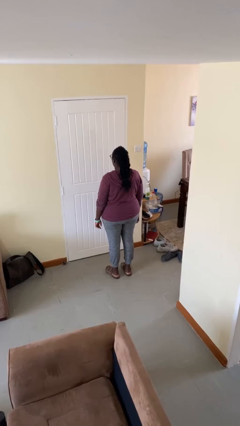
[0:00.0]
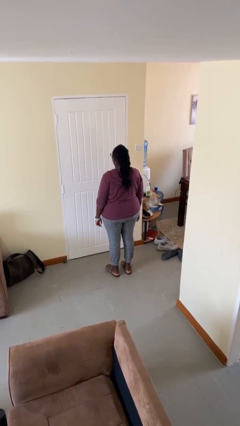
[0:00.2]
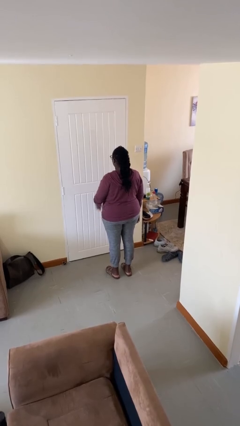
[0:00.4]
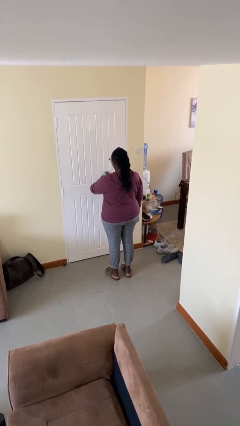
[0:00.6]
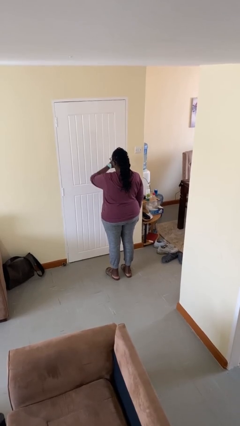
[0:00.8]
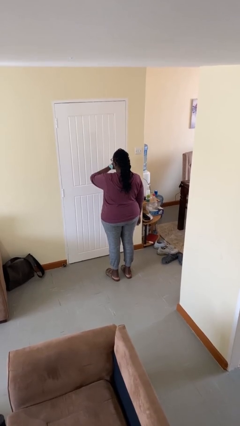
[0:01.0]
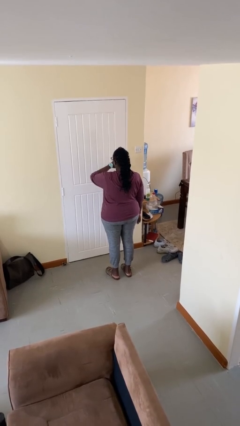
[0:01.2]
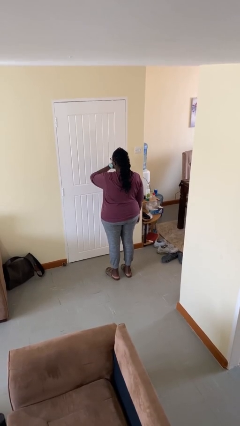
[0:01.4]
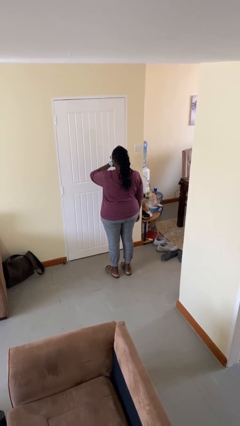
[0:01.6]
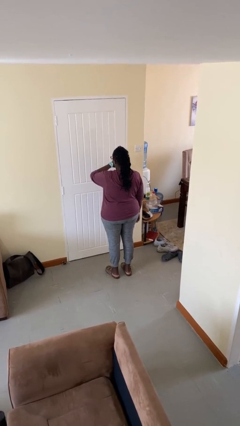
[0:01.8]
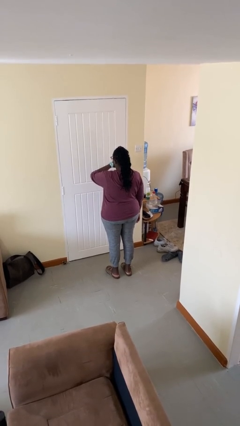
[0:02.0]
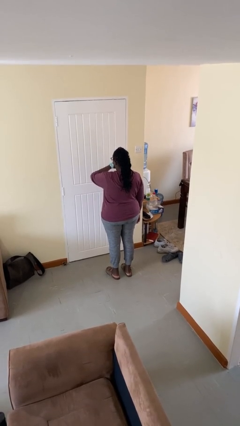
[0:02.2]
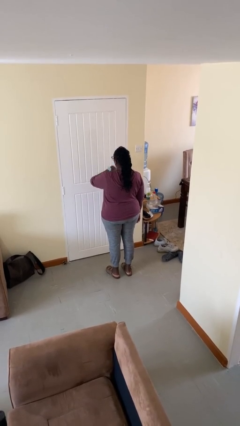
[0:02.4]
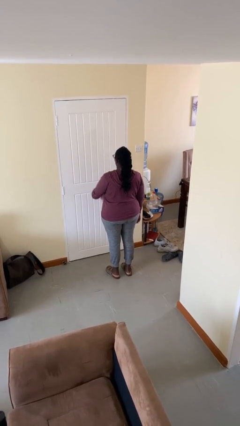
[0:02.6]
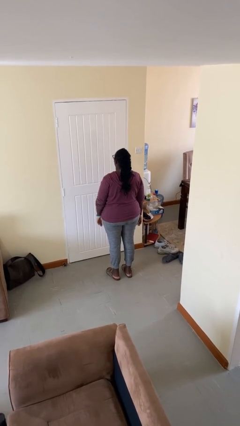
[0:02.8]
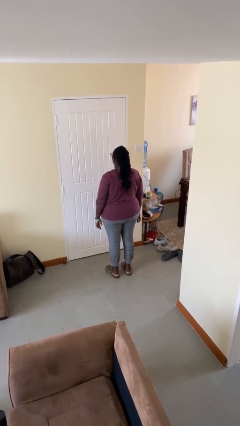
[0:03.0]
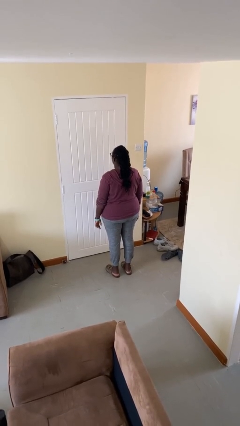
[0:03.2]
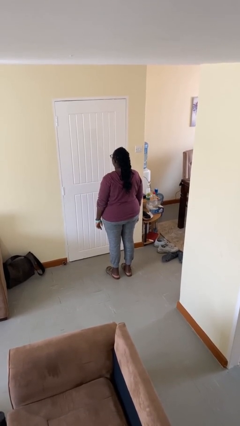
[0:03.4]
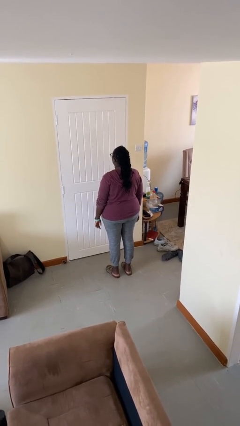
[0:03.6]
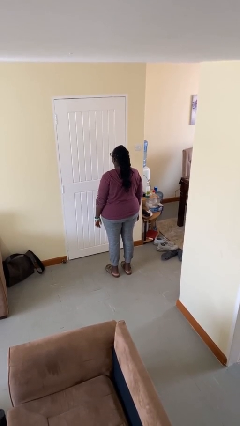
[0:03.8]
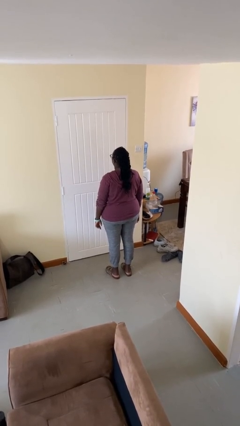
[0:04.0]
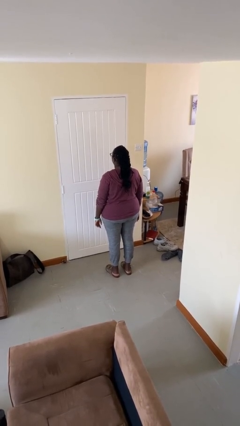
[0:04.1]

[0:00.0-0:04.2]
person looks at wristwatch

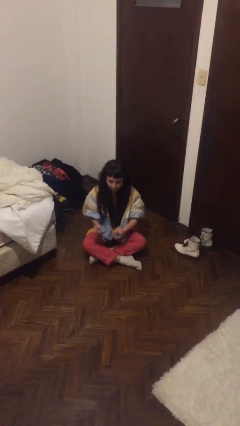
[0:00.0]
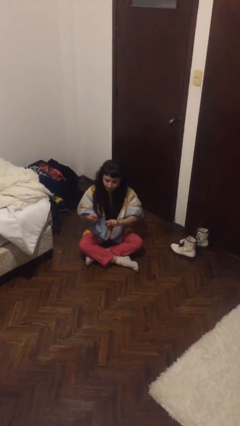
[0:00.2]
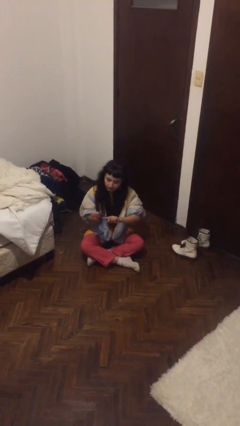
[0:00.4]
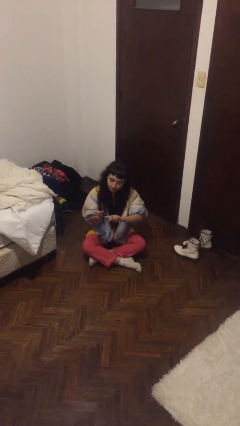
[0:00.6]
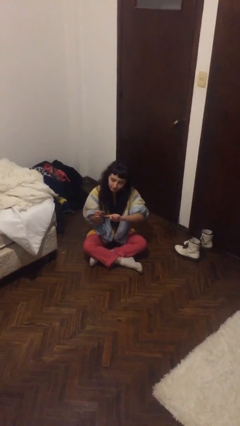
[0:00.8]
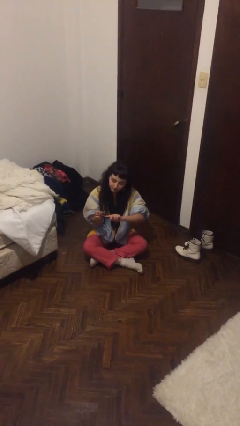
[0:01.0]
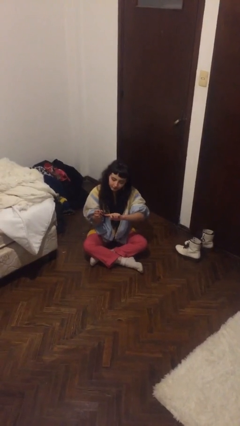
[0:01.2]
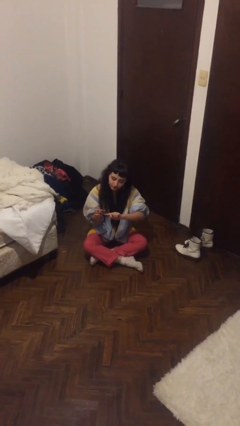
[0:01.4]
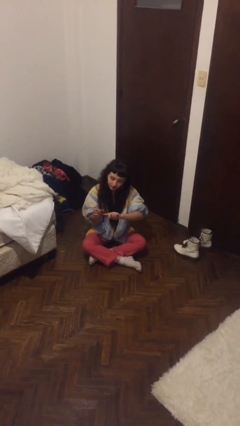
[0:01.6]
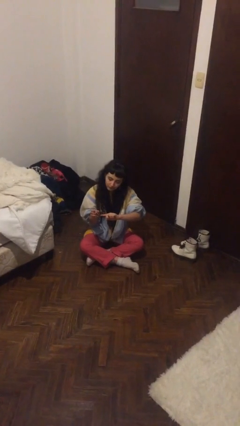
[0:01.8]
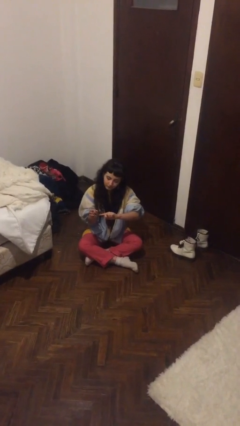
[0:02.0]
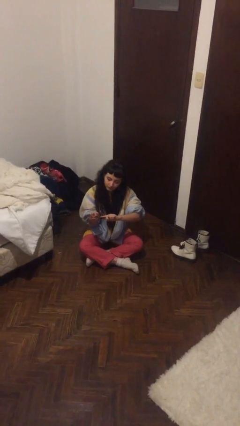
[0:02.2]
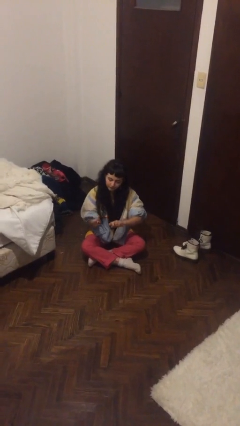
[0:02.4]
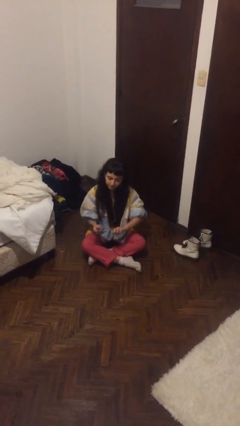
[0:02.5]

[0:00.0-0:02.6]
person clips fingernails

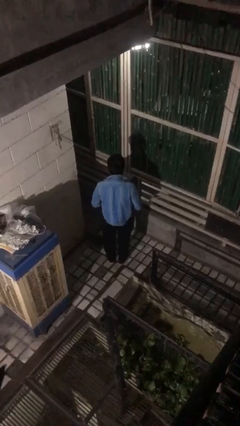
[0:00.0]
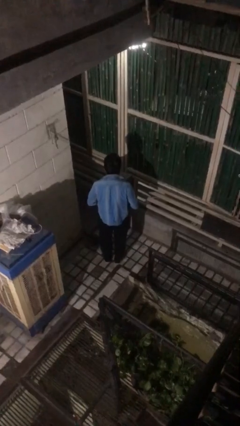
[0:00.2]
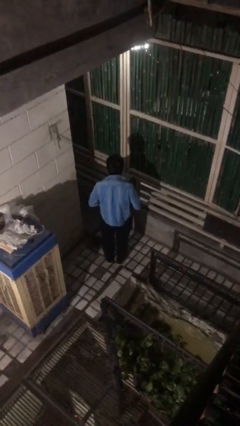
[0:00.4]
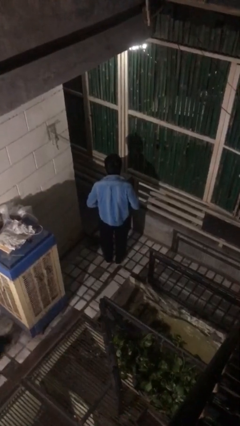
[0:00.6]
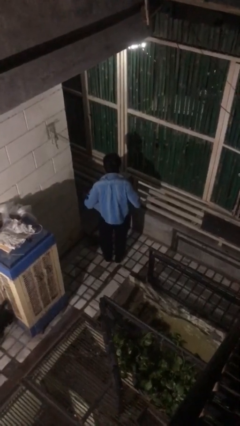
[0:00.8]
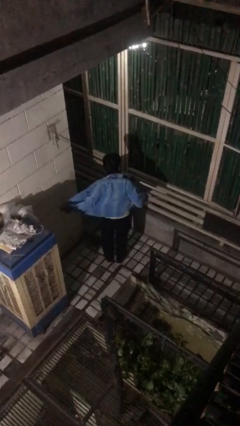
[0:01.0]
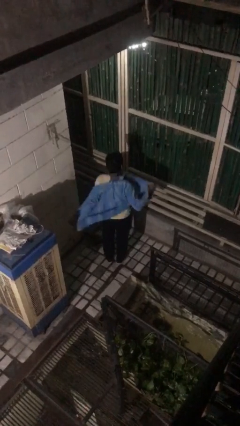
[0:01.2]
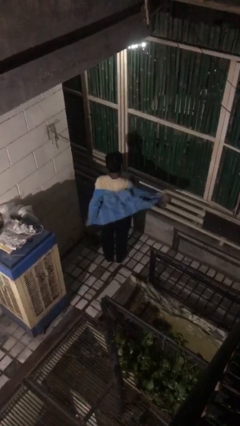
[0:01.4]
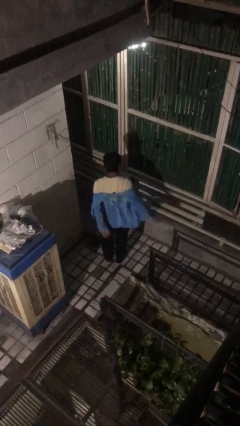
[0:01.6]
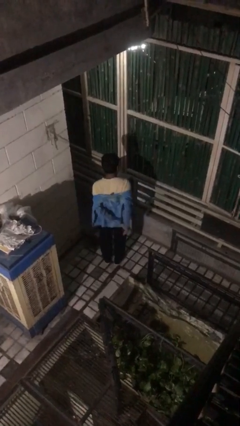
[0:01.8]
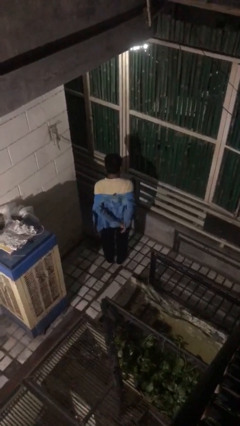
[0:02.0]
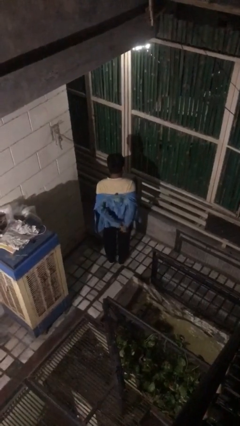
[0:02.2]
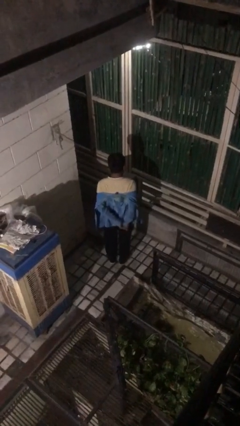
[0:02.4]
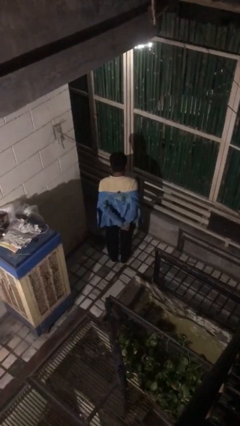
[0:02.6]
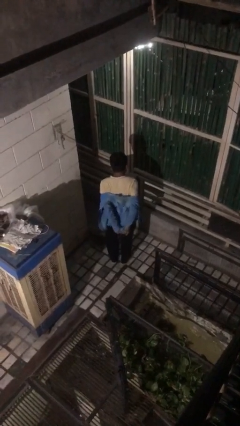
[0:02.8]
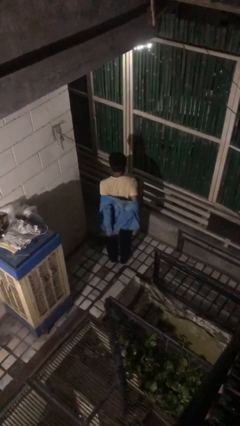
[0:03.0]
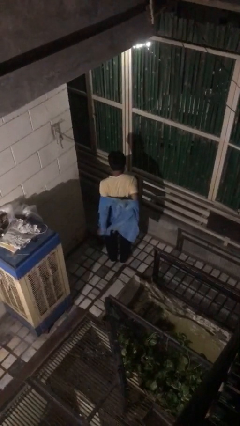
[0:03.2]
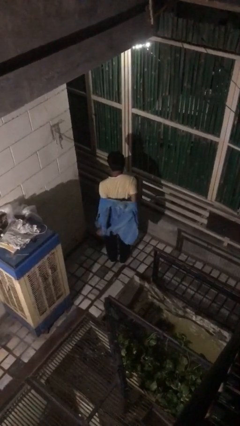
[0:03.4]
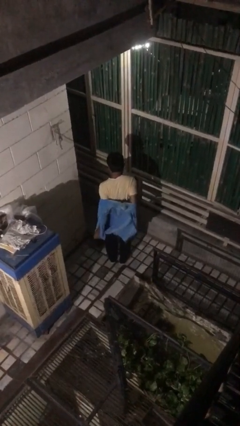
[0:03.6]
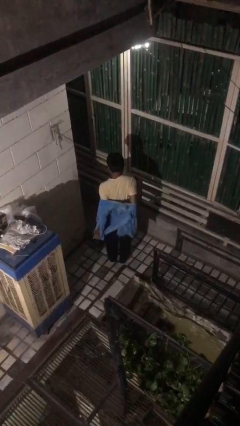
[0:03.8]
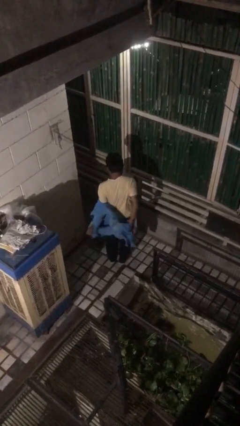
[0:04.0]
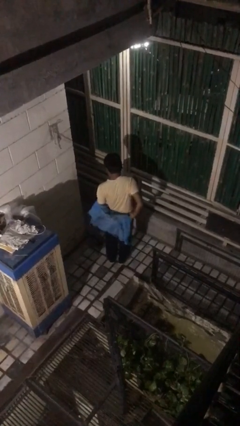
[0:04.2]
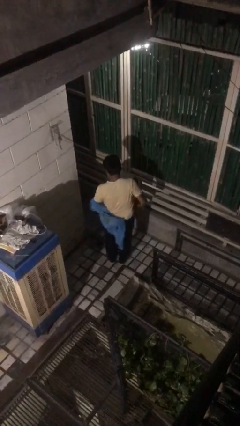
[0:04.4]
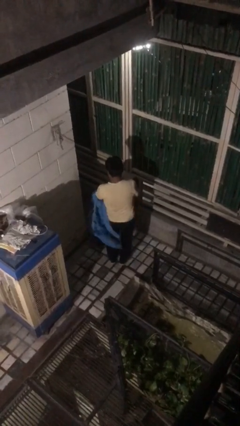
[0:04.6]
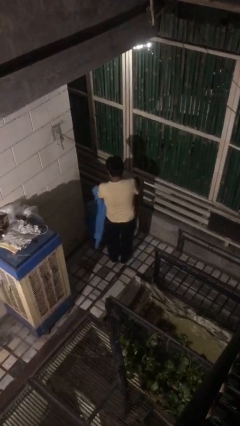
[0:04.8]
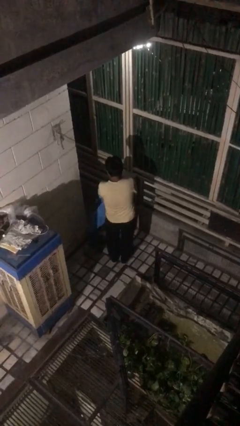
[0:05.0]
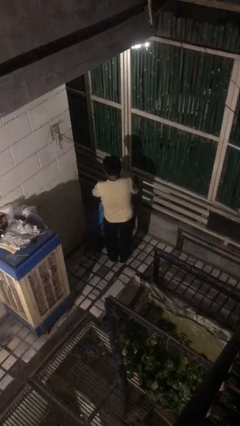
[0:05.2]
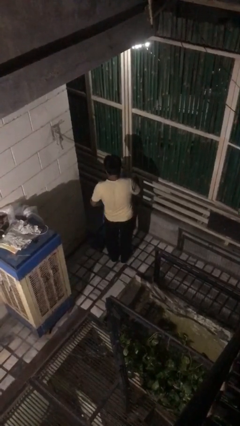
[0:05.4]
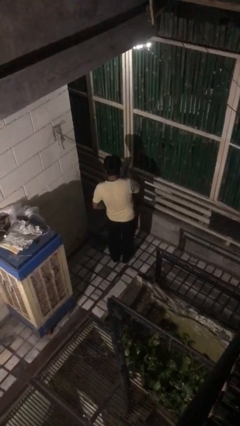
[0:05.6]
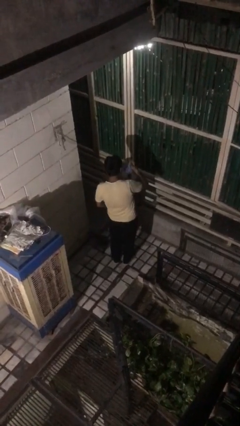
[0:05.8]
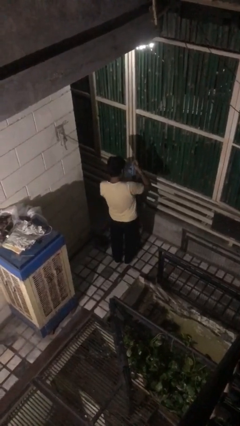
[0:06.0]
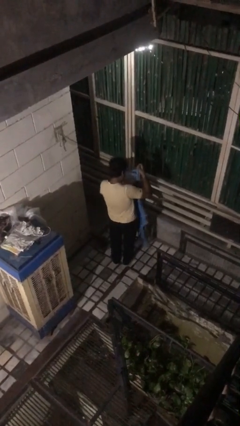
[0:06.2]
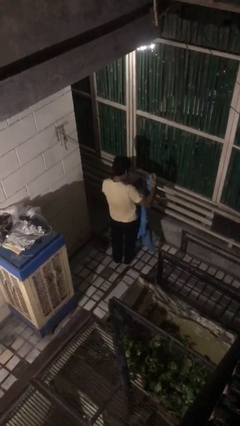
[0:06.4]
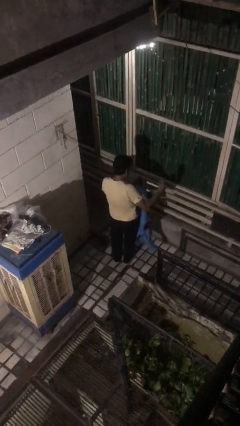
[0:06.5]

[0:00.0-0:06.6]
person takes off shirt

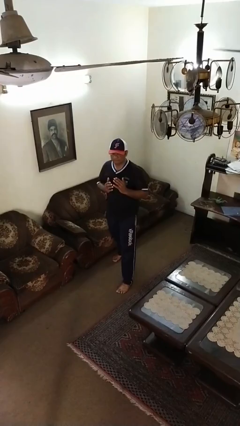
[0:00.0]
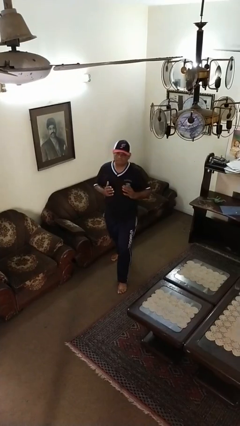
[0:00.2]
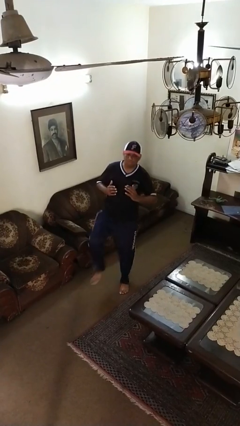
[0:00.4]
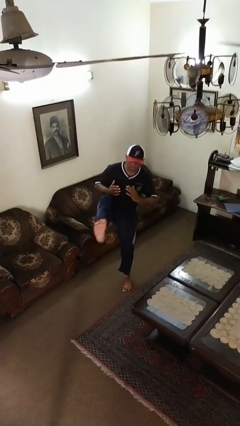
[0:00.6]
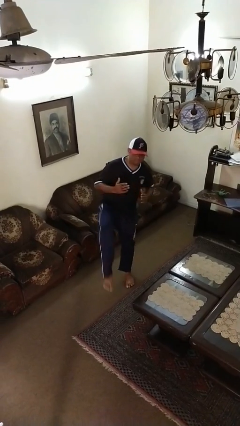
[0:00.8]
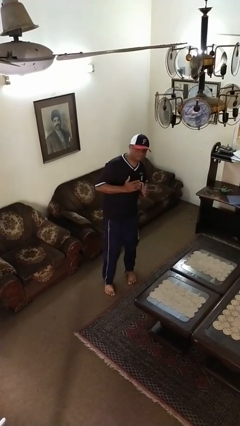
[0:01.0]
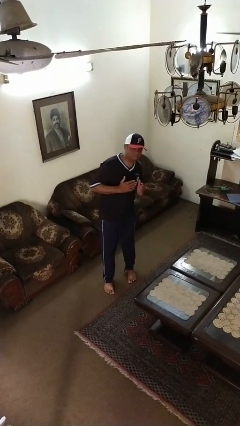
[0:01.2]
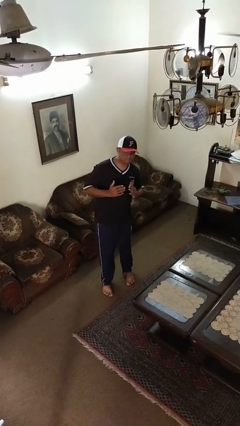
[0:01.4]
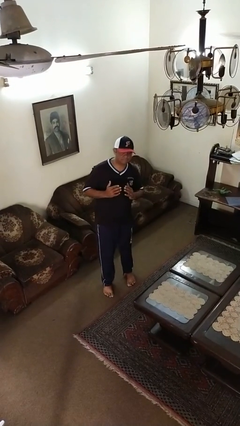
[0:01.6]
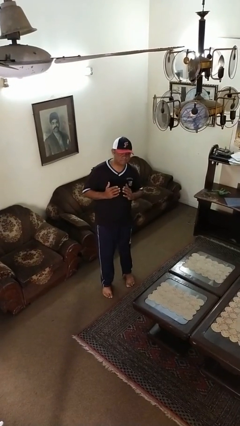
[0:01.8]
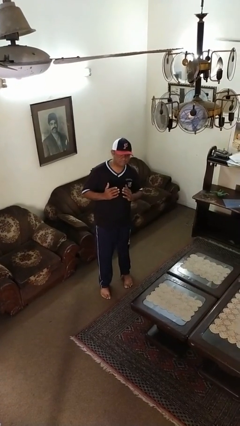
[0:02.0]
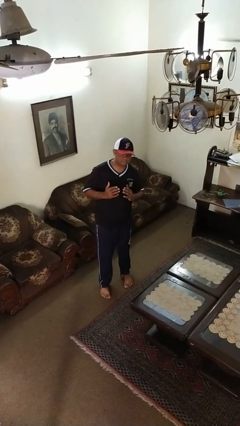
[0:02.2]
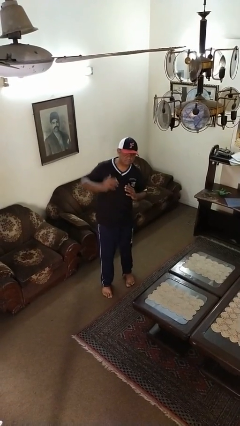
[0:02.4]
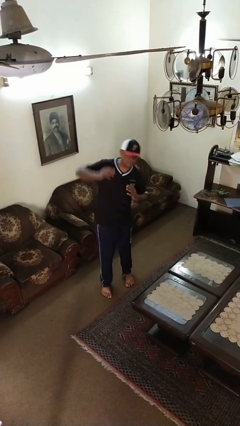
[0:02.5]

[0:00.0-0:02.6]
person karate kicks

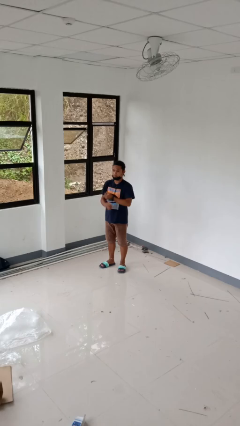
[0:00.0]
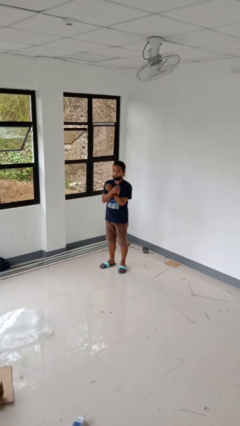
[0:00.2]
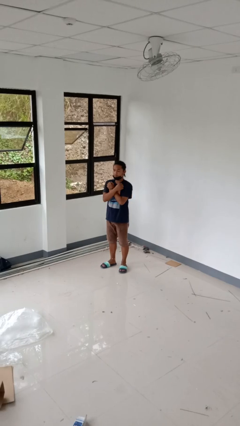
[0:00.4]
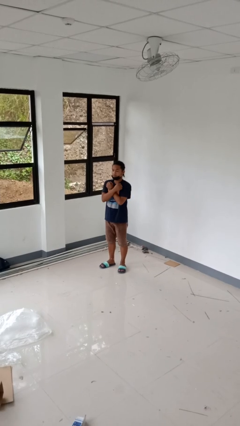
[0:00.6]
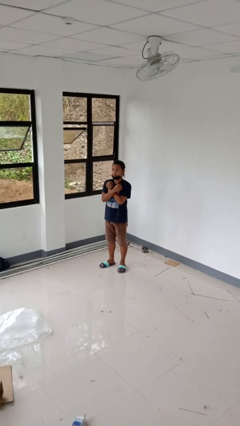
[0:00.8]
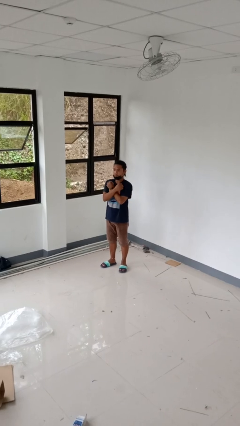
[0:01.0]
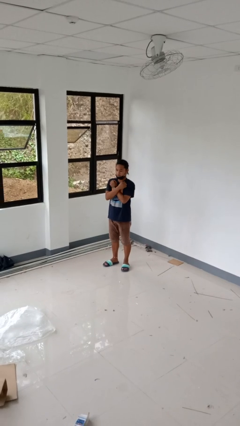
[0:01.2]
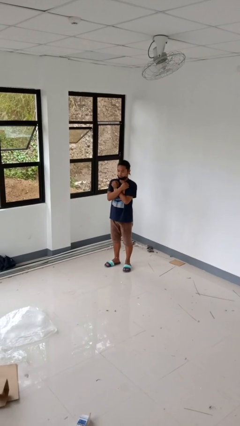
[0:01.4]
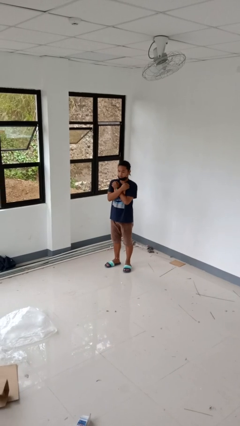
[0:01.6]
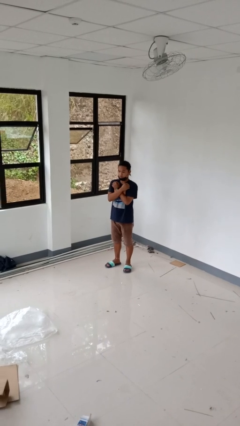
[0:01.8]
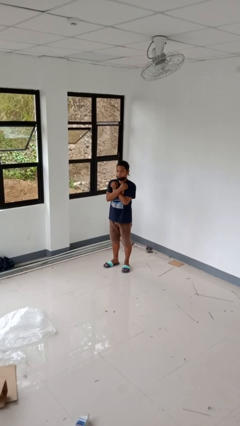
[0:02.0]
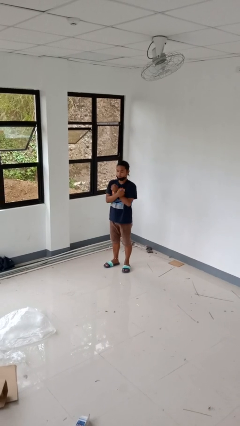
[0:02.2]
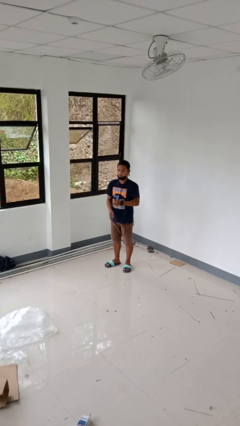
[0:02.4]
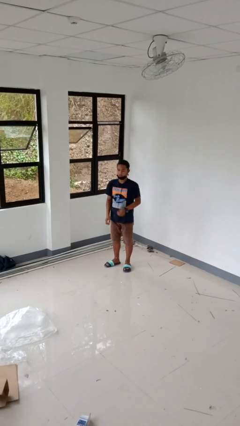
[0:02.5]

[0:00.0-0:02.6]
person gestures arms x
